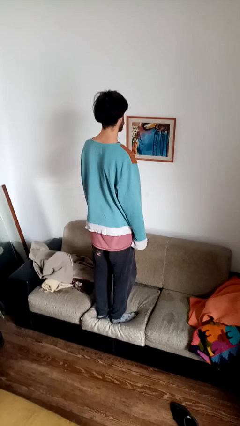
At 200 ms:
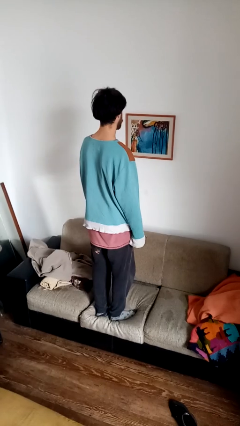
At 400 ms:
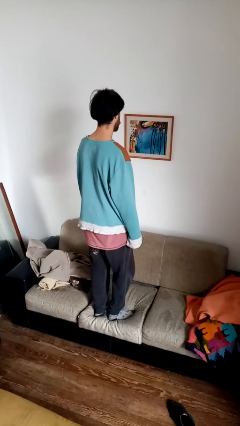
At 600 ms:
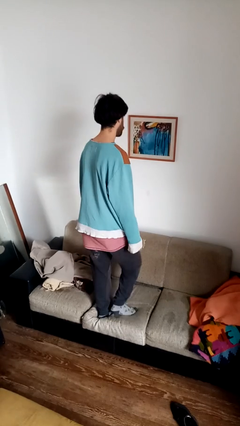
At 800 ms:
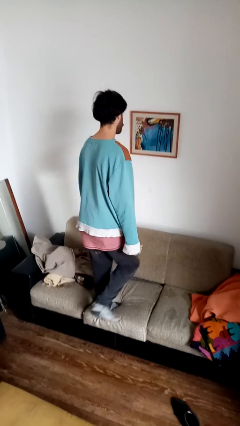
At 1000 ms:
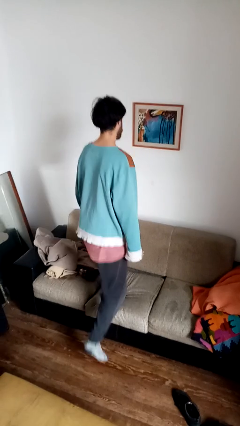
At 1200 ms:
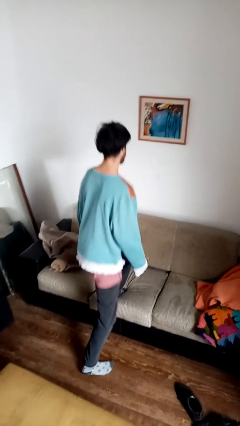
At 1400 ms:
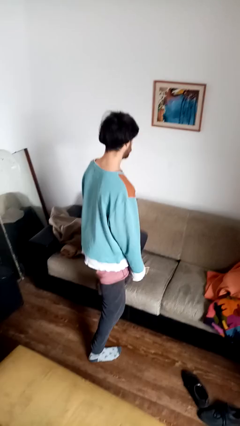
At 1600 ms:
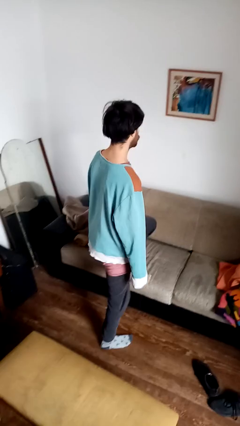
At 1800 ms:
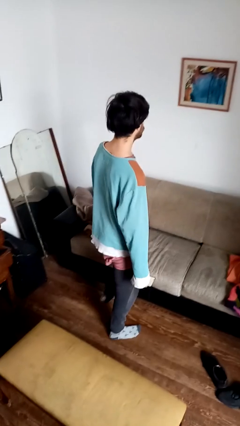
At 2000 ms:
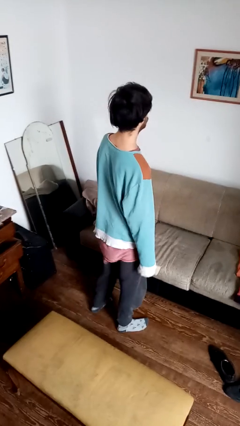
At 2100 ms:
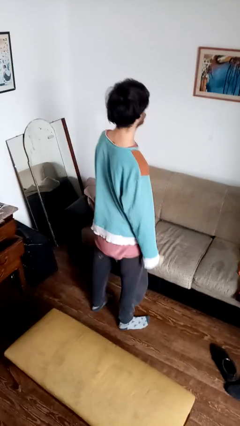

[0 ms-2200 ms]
person climbs off couch

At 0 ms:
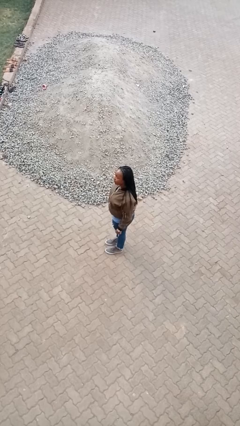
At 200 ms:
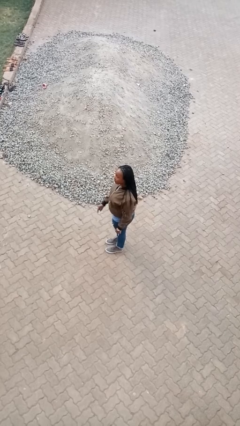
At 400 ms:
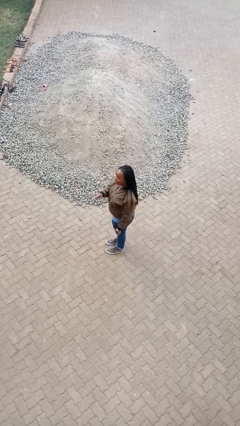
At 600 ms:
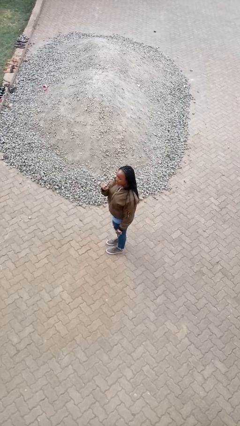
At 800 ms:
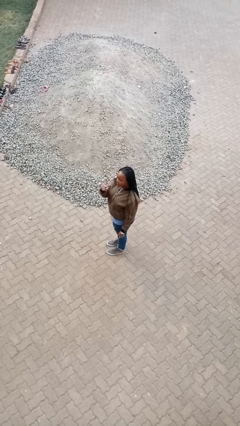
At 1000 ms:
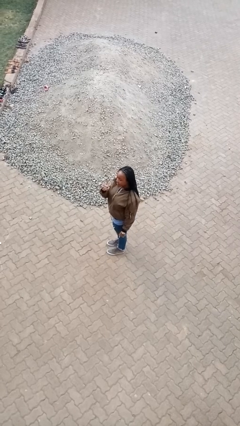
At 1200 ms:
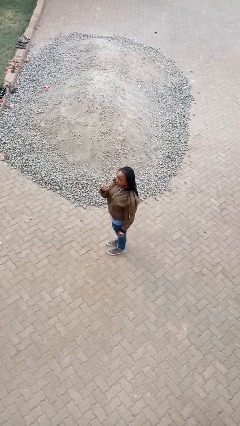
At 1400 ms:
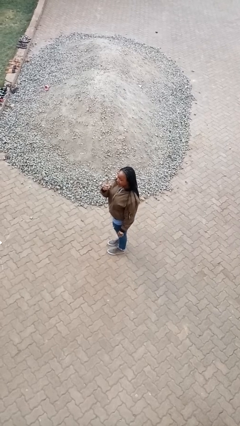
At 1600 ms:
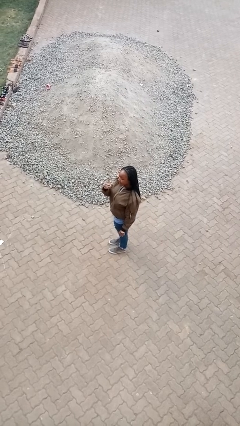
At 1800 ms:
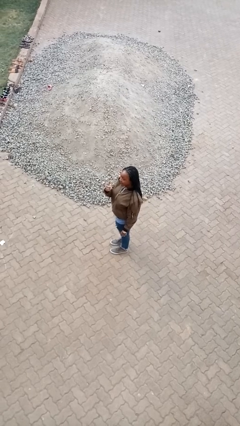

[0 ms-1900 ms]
person gestures number one

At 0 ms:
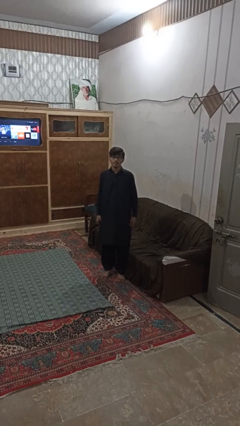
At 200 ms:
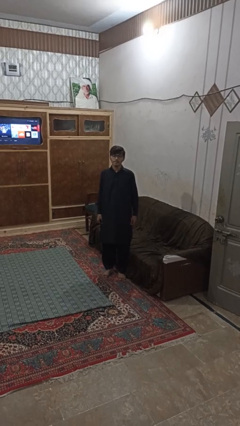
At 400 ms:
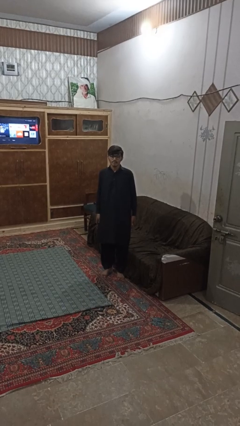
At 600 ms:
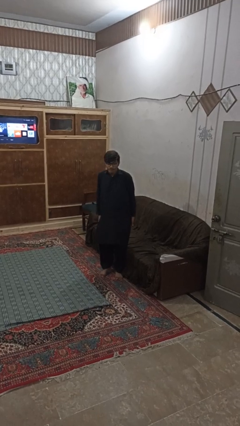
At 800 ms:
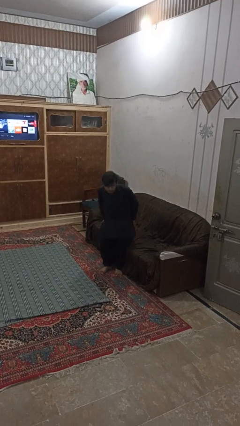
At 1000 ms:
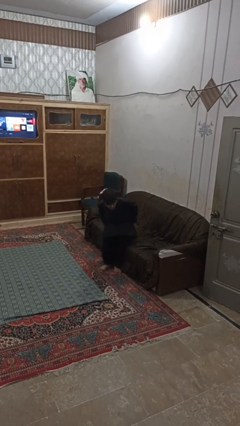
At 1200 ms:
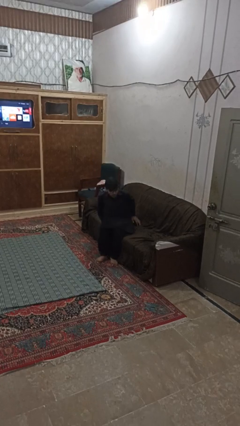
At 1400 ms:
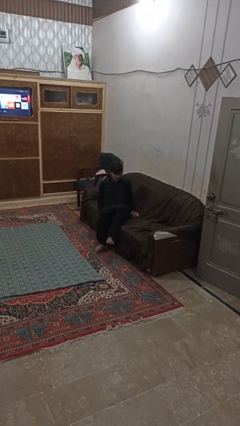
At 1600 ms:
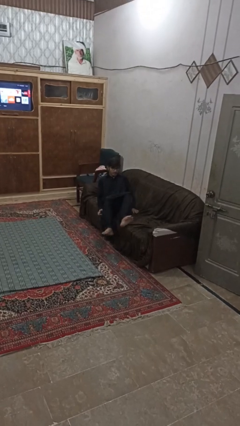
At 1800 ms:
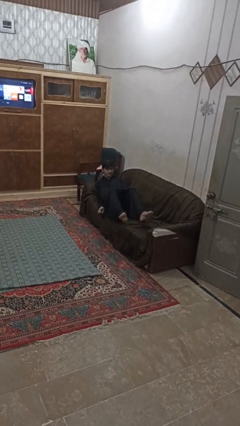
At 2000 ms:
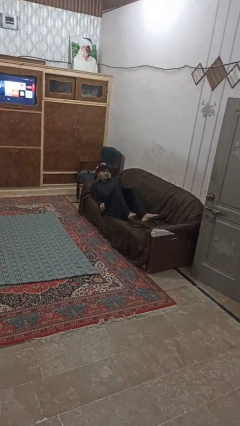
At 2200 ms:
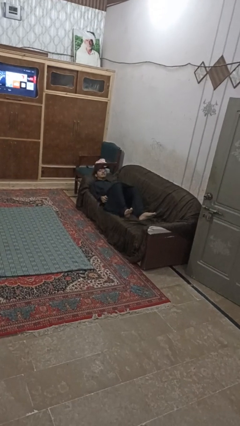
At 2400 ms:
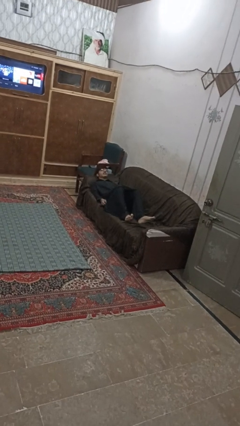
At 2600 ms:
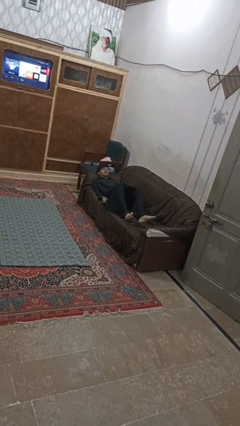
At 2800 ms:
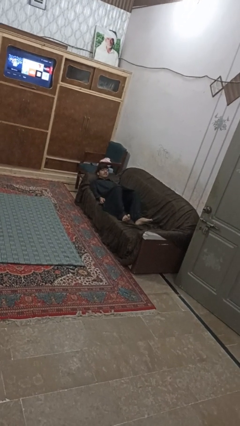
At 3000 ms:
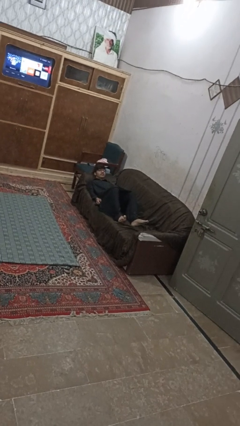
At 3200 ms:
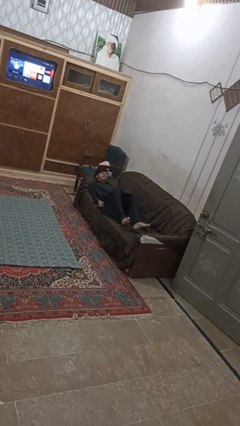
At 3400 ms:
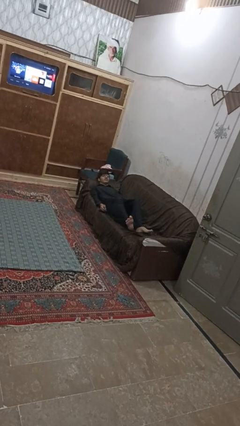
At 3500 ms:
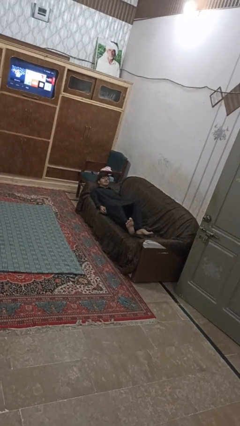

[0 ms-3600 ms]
person lies down on couch

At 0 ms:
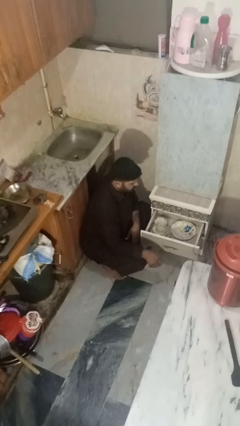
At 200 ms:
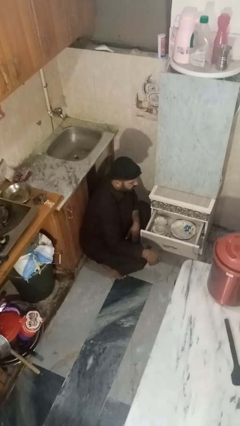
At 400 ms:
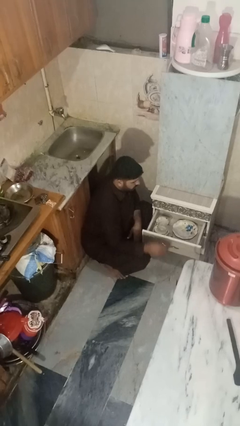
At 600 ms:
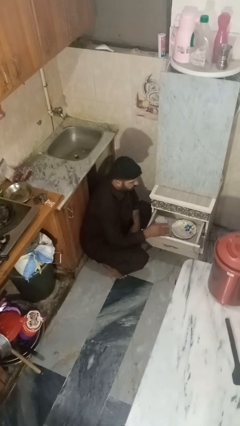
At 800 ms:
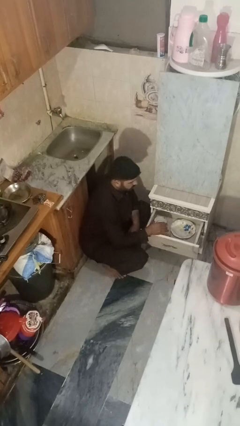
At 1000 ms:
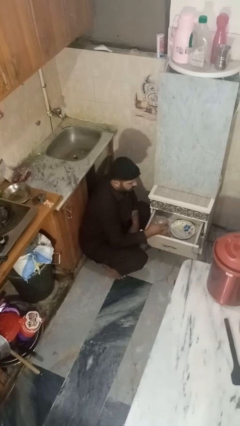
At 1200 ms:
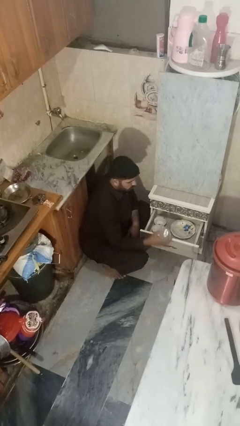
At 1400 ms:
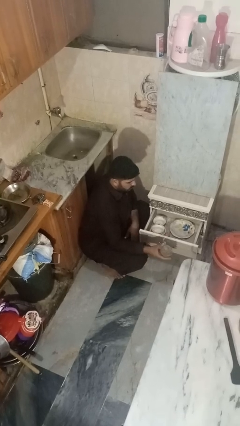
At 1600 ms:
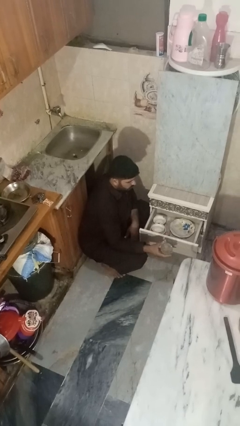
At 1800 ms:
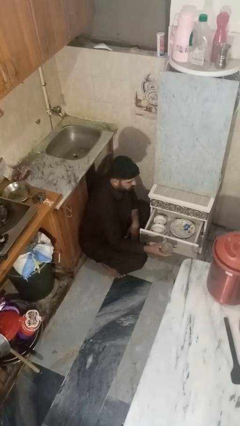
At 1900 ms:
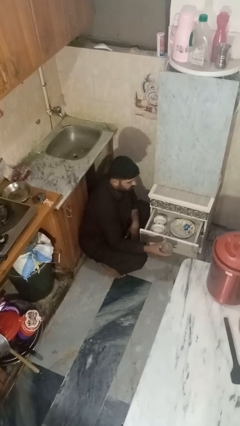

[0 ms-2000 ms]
person takes object from kitchen drawer

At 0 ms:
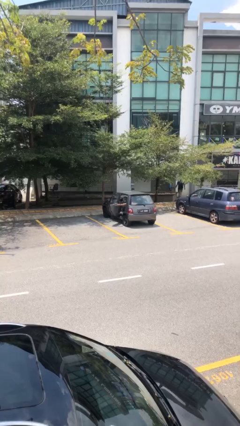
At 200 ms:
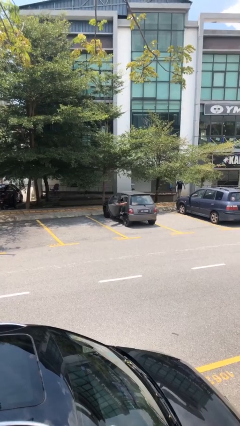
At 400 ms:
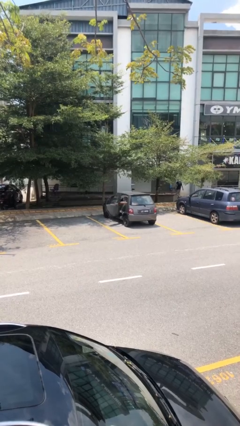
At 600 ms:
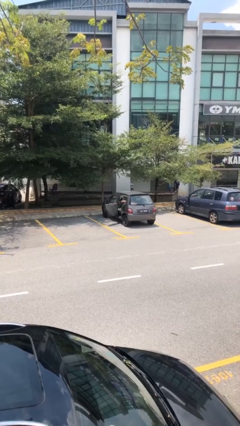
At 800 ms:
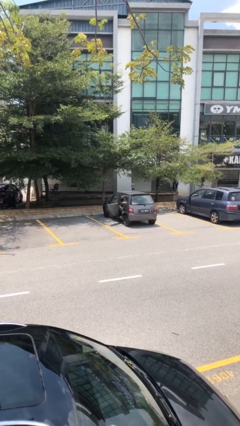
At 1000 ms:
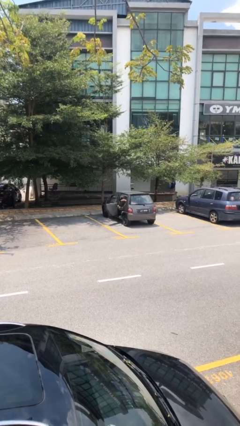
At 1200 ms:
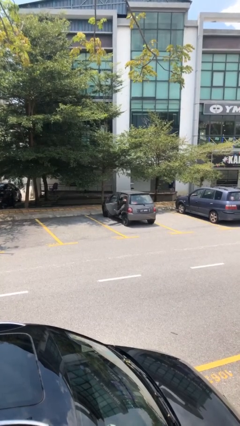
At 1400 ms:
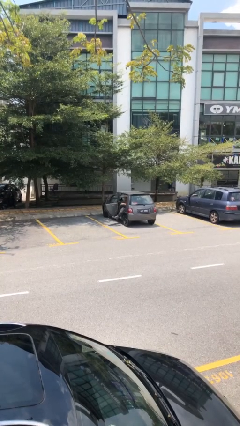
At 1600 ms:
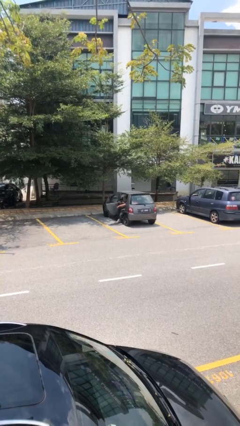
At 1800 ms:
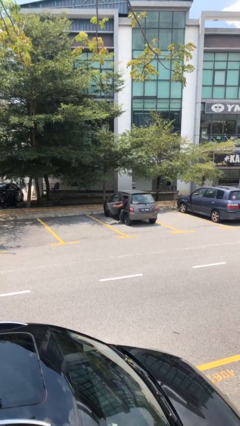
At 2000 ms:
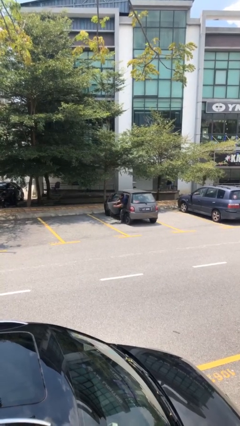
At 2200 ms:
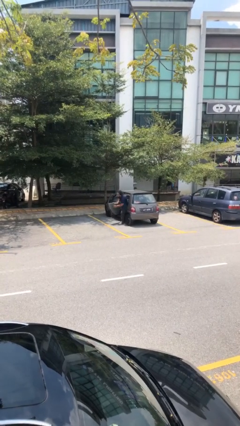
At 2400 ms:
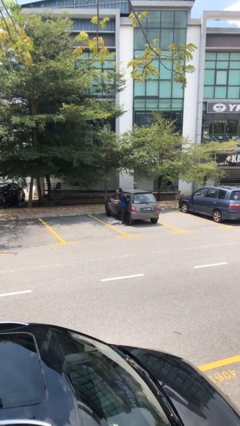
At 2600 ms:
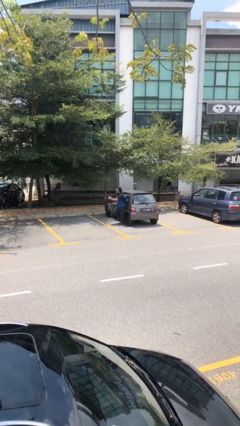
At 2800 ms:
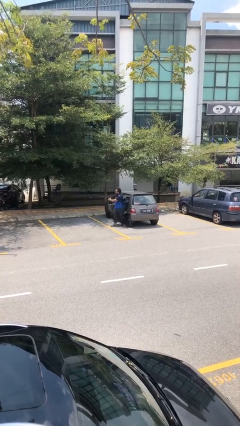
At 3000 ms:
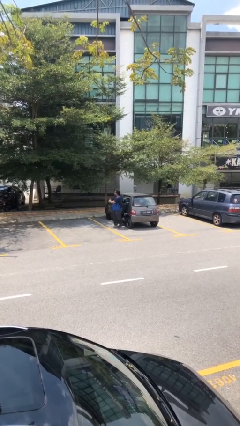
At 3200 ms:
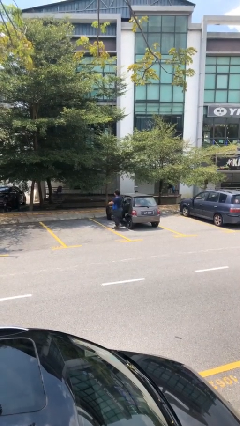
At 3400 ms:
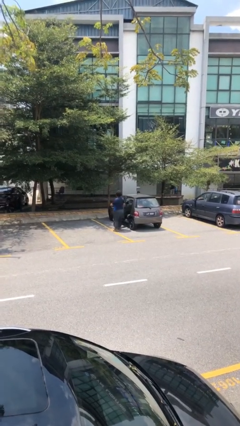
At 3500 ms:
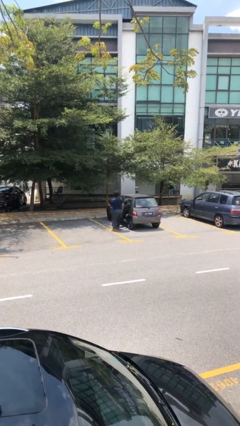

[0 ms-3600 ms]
person exits car

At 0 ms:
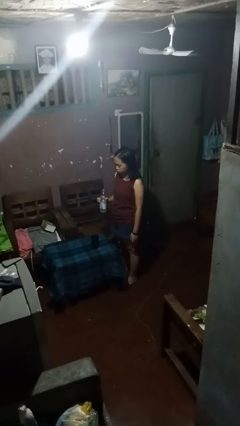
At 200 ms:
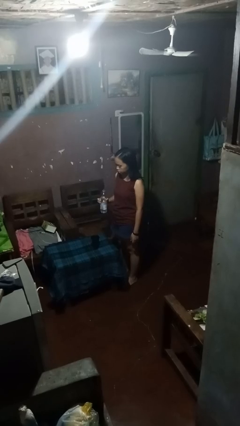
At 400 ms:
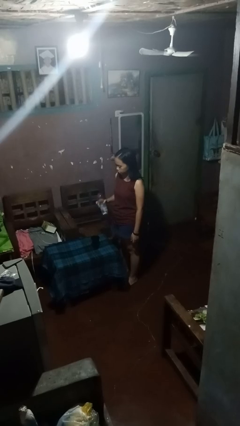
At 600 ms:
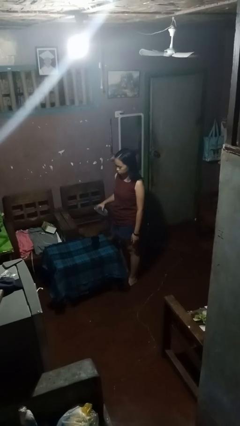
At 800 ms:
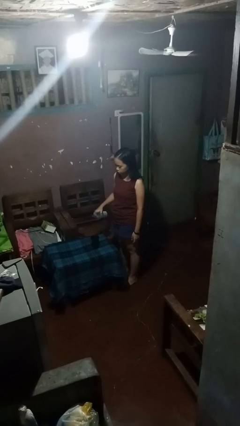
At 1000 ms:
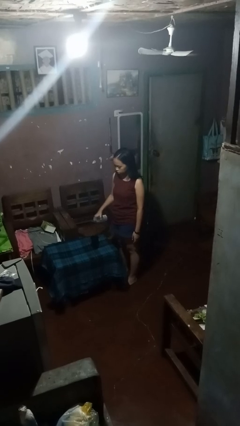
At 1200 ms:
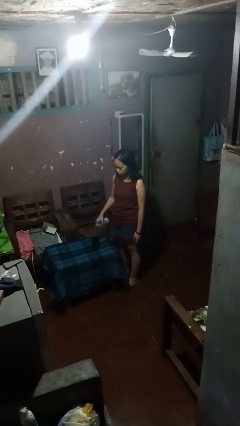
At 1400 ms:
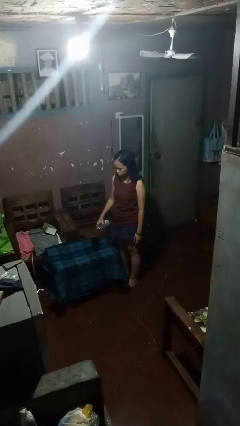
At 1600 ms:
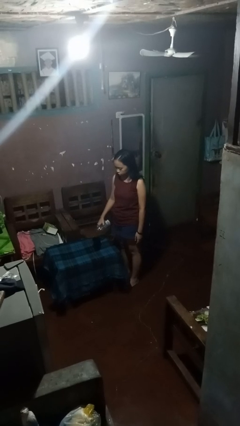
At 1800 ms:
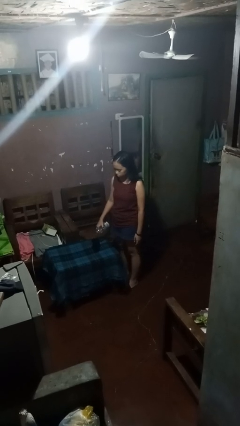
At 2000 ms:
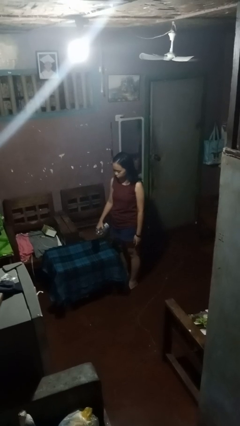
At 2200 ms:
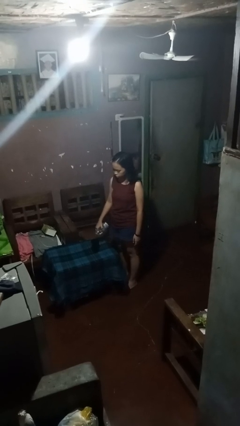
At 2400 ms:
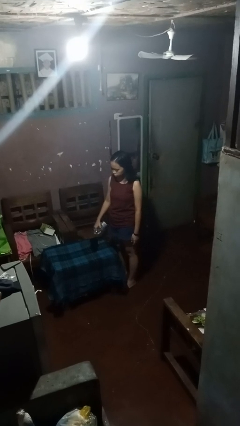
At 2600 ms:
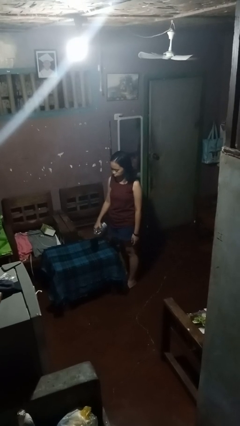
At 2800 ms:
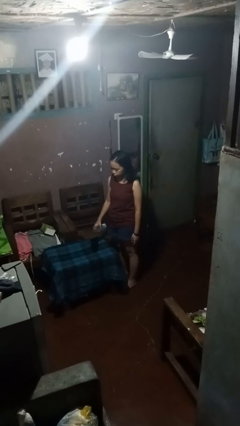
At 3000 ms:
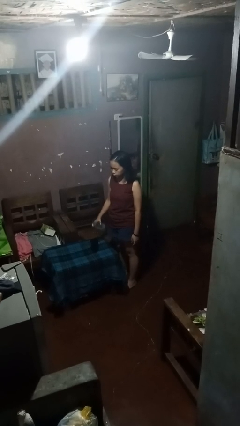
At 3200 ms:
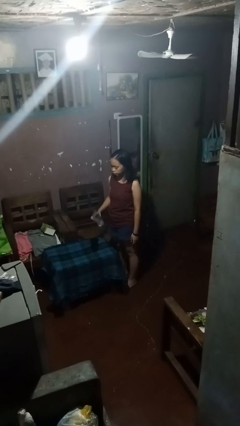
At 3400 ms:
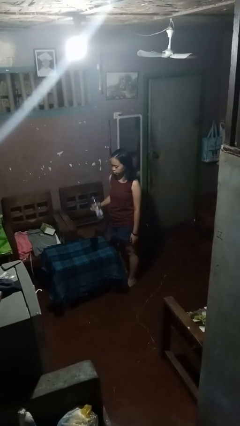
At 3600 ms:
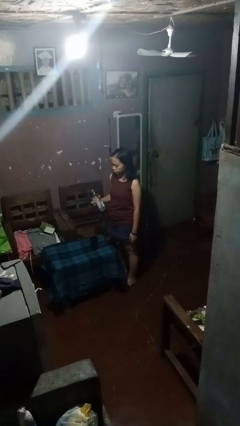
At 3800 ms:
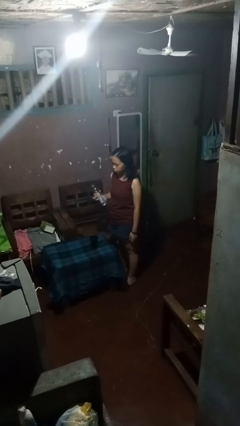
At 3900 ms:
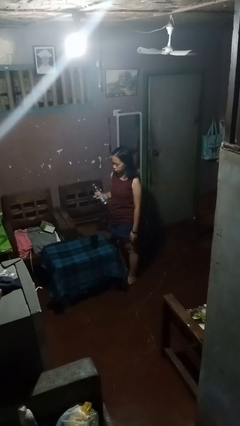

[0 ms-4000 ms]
person pours liquid into cup

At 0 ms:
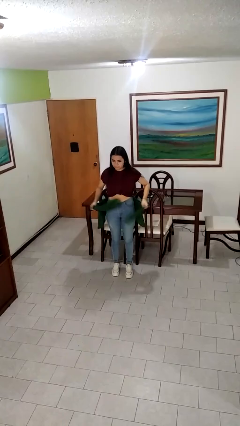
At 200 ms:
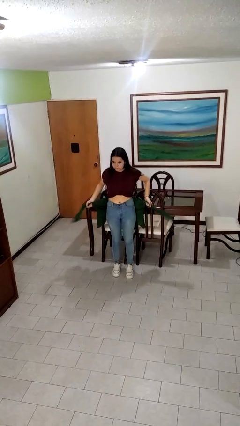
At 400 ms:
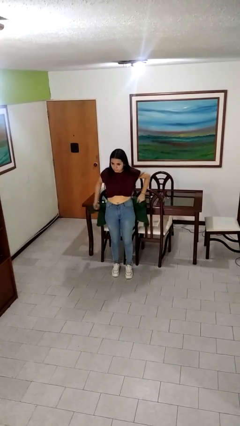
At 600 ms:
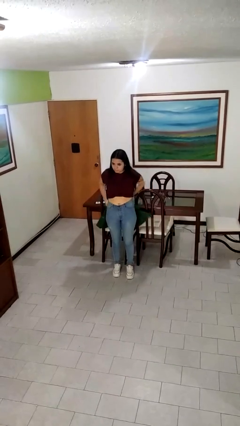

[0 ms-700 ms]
person unties jacket around waist
